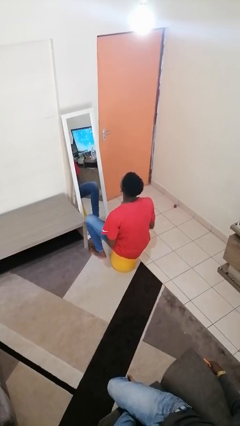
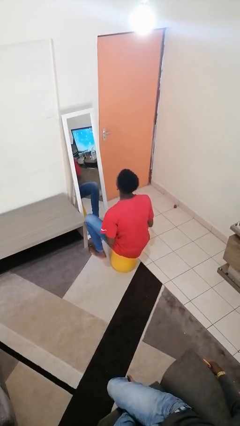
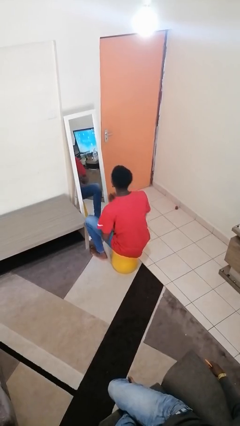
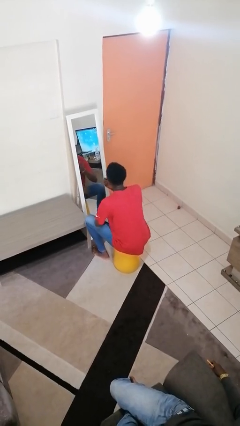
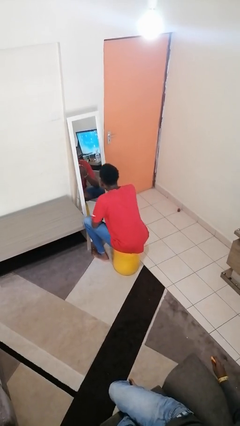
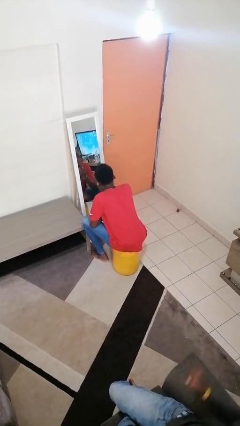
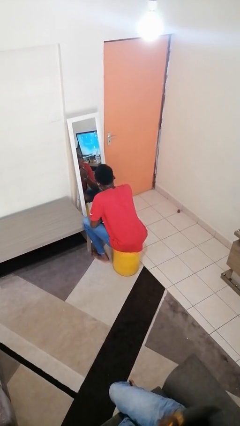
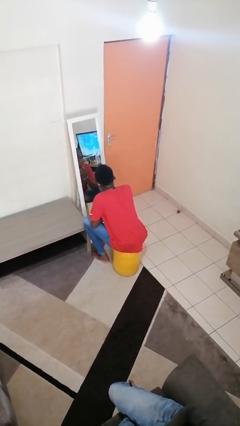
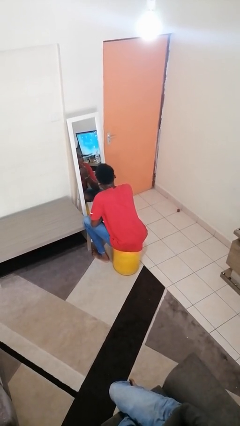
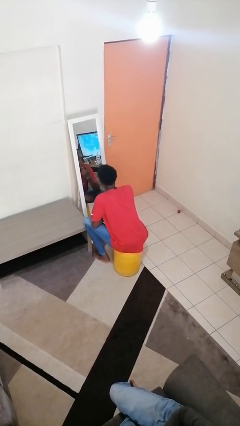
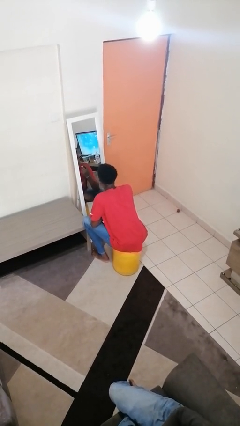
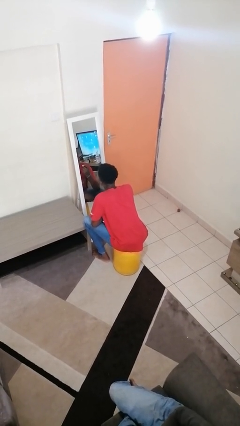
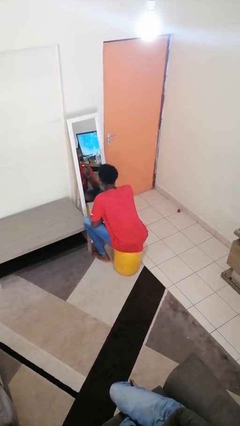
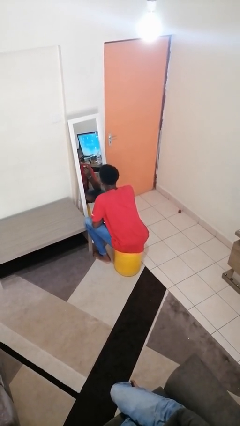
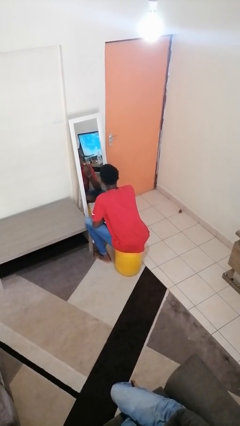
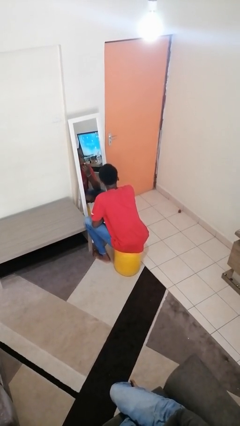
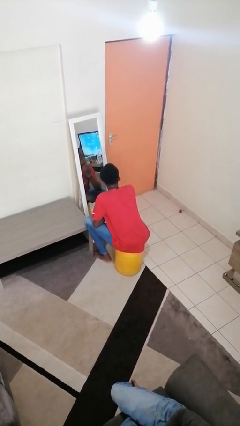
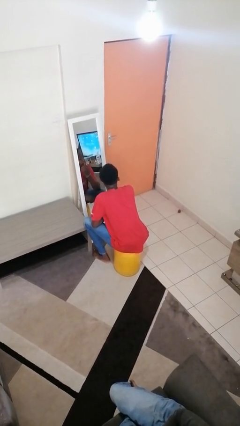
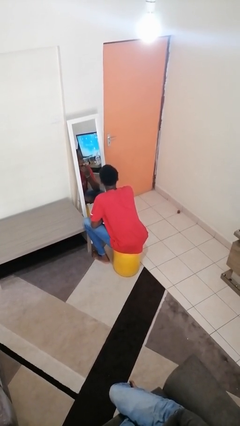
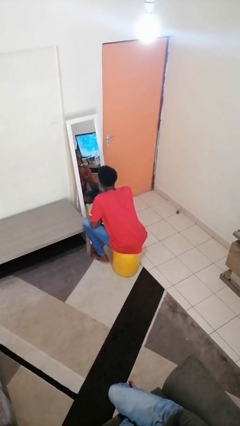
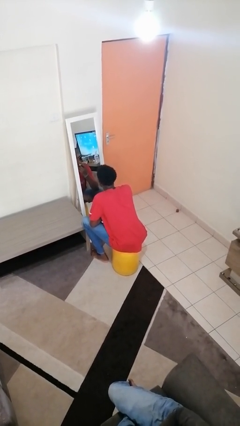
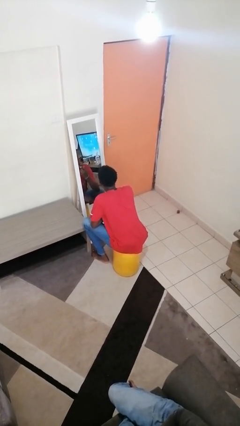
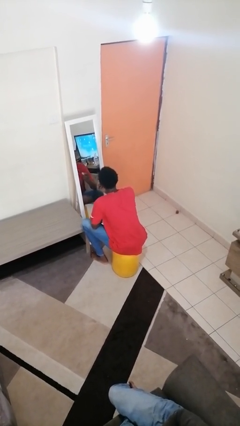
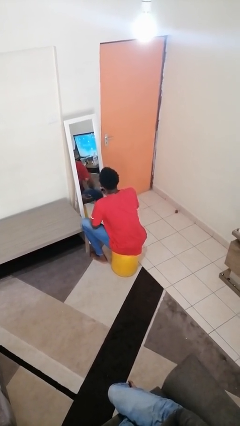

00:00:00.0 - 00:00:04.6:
person applies lip makeup

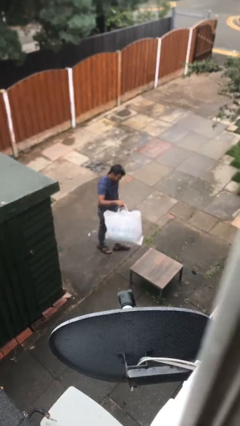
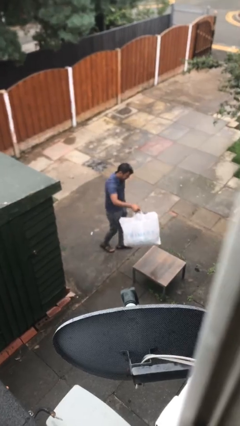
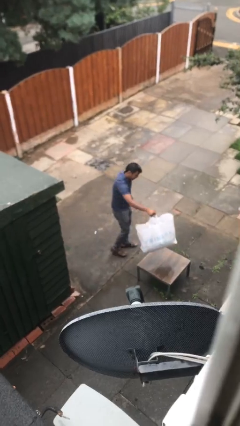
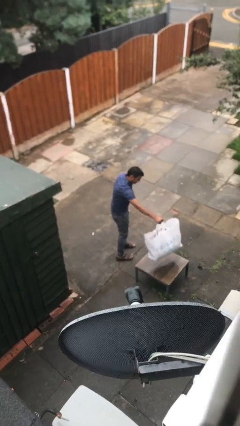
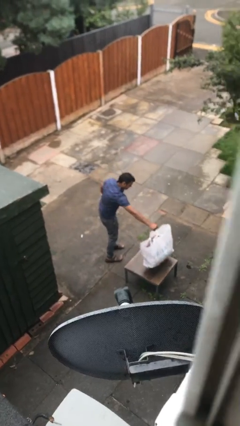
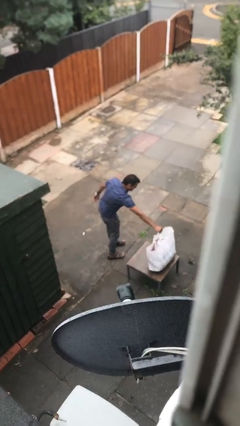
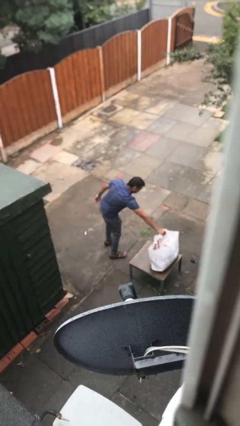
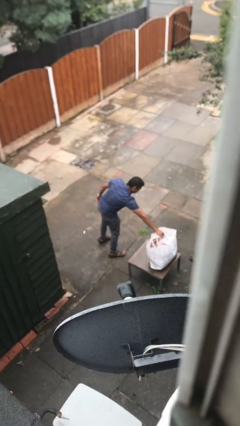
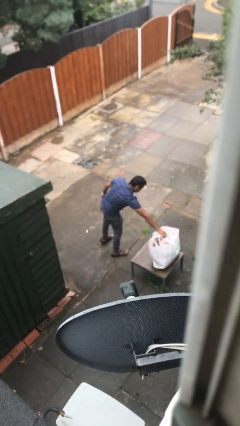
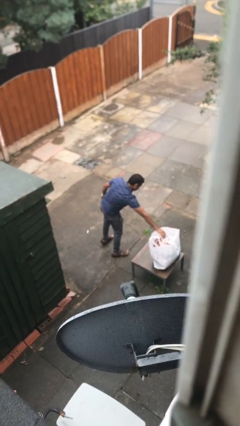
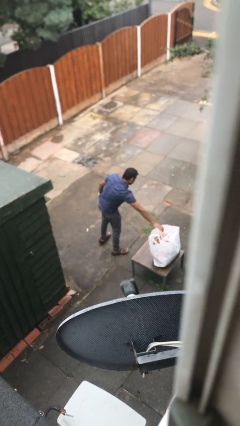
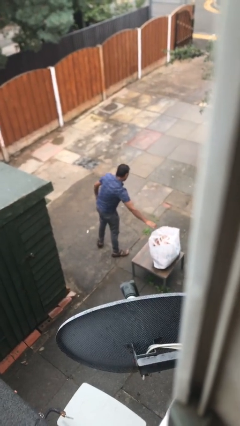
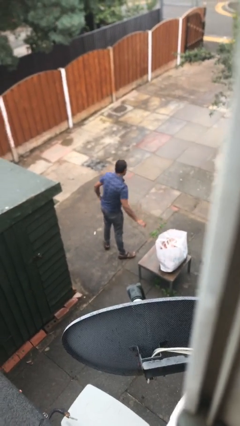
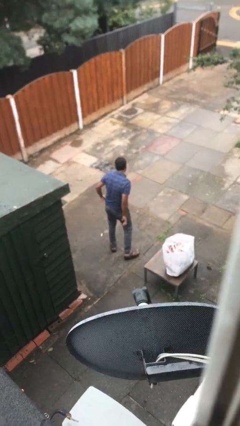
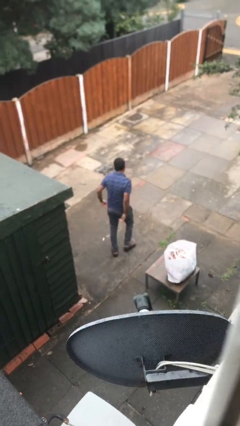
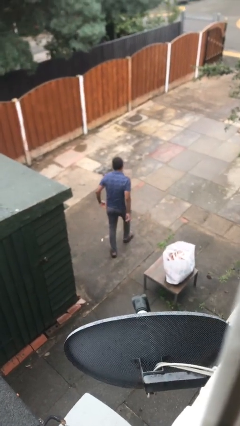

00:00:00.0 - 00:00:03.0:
person puts down object on table

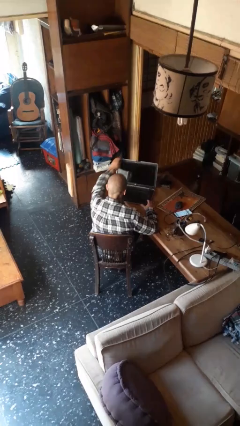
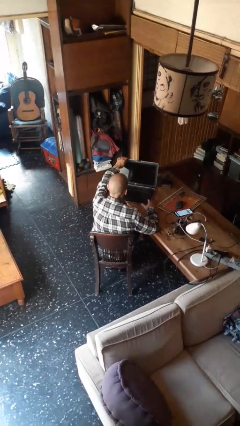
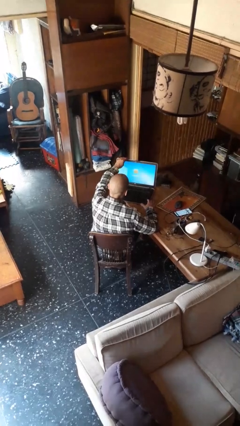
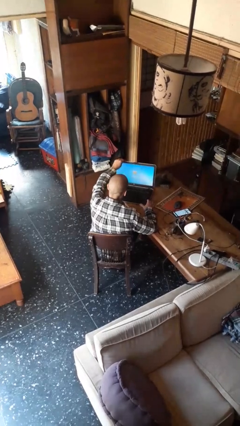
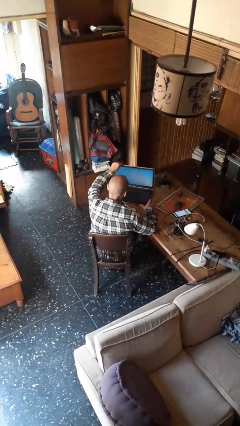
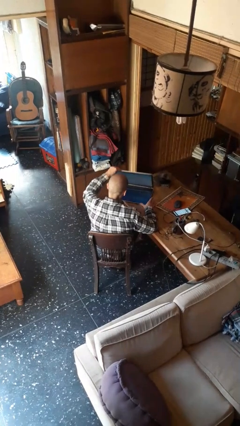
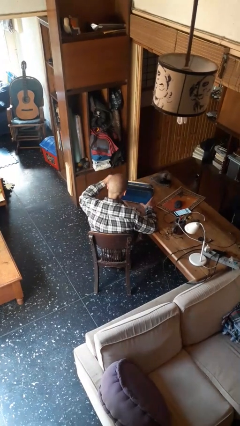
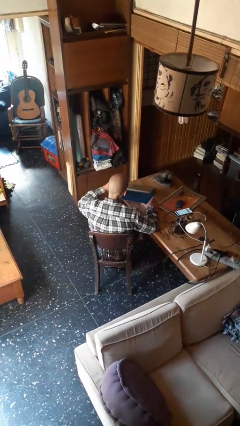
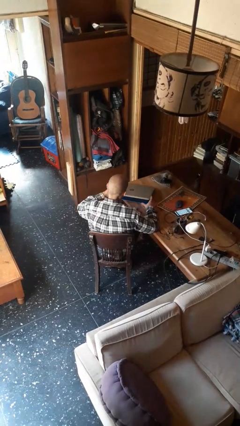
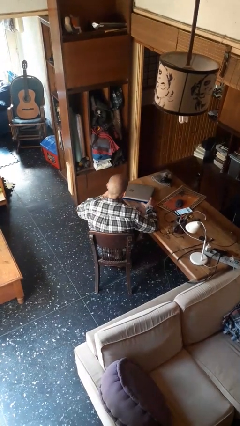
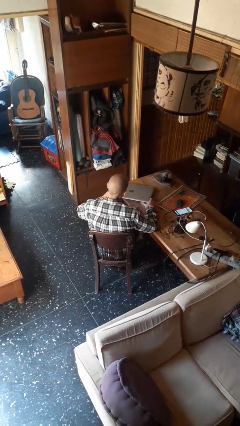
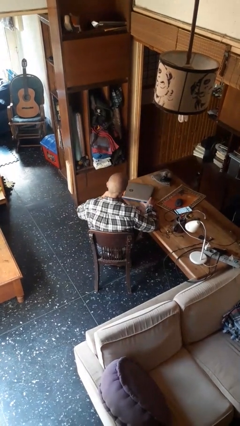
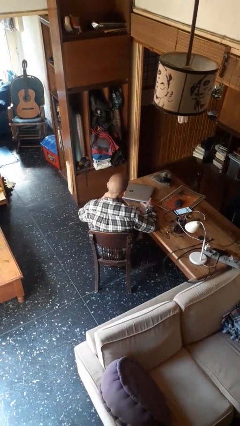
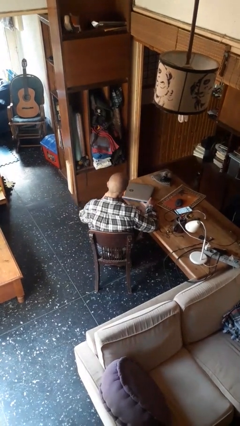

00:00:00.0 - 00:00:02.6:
person closes laptop

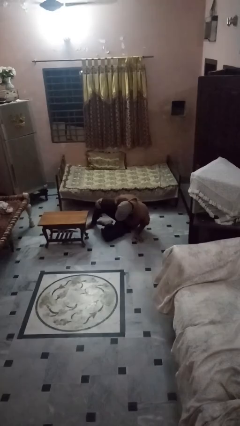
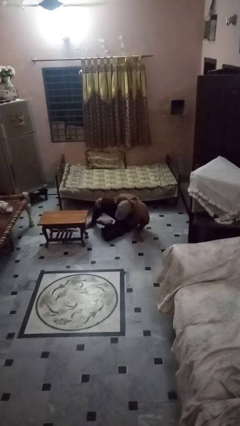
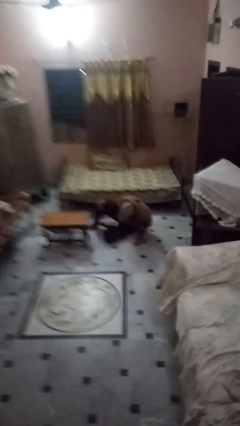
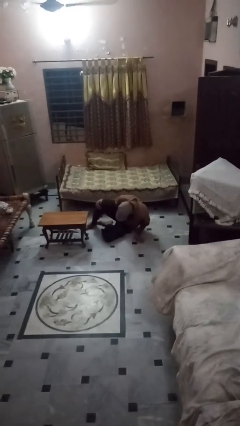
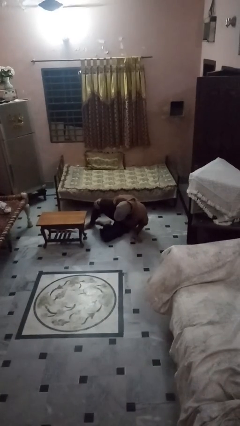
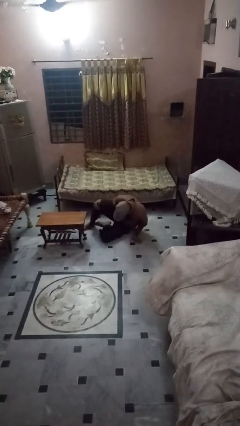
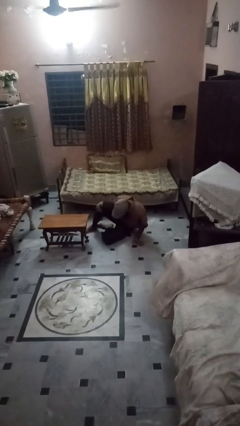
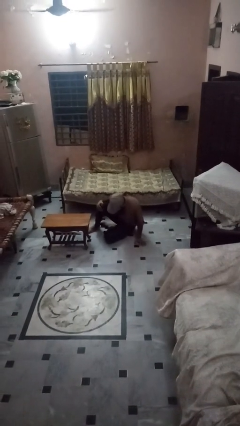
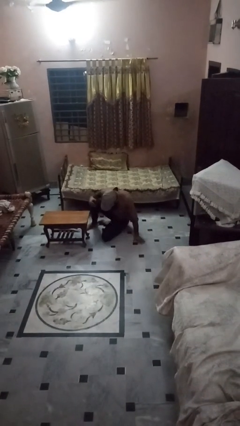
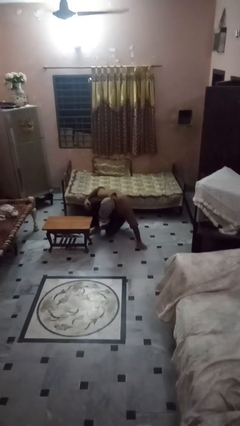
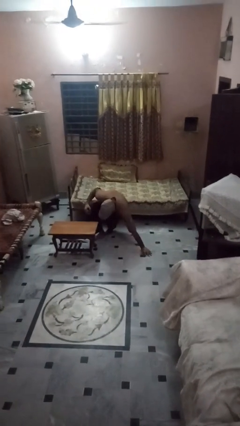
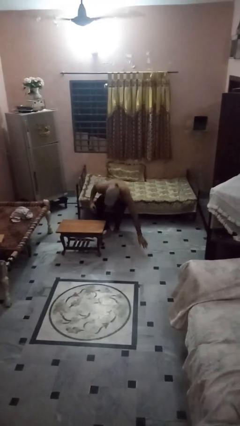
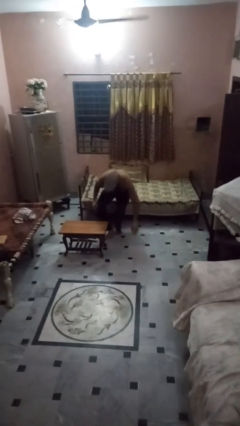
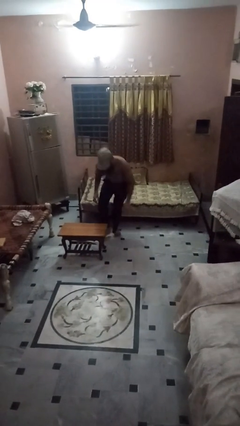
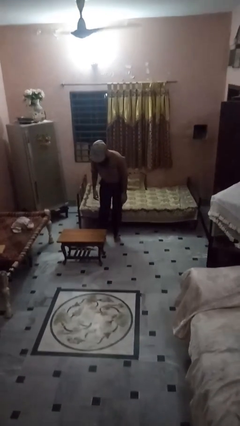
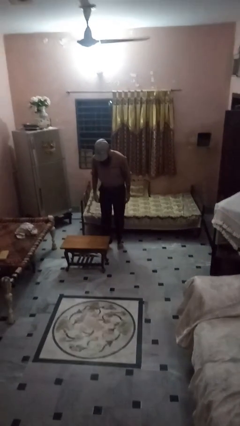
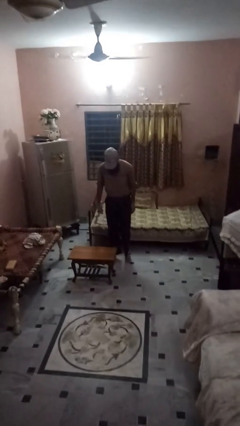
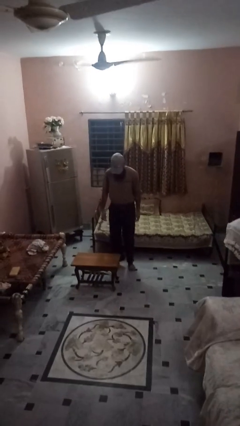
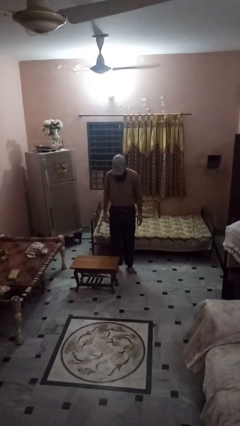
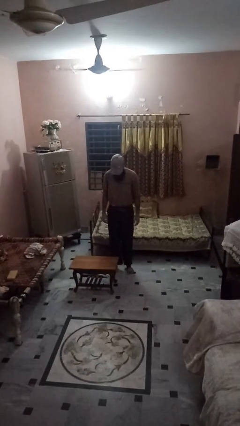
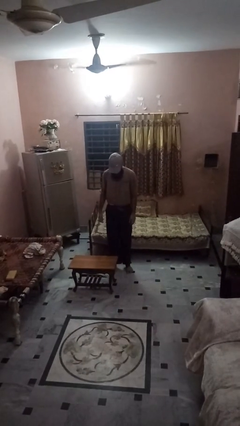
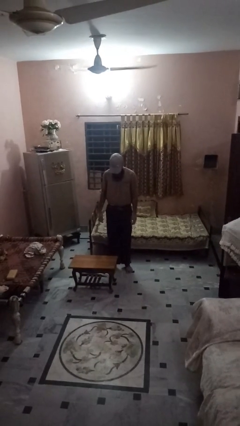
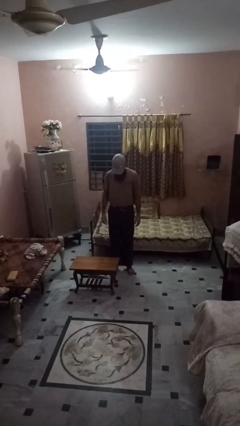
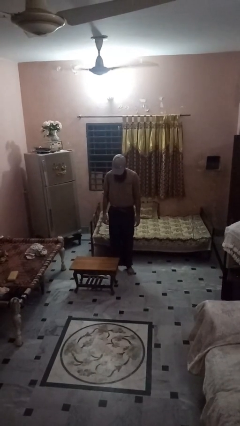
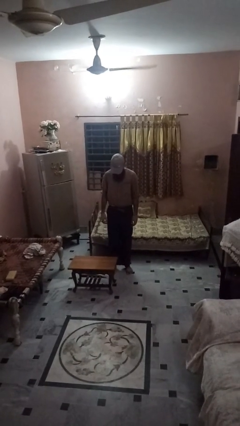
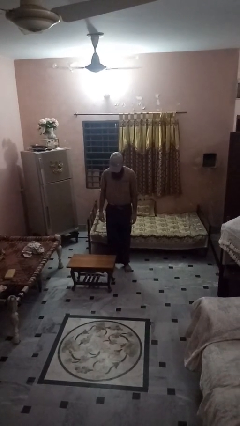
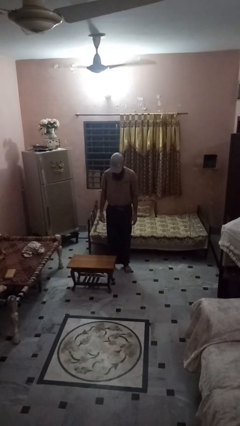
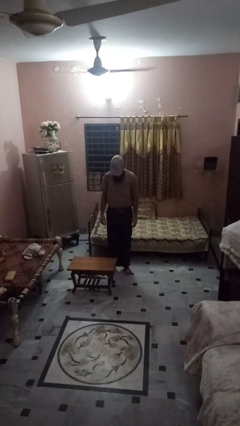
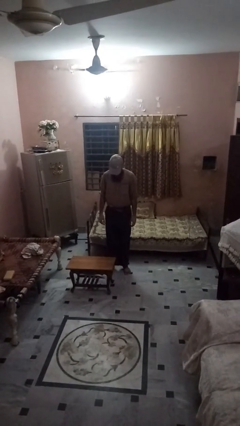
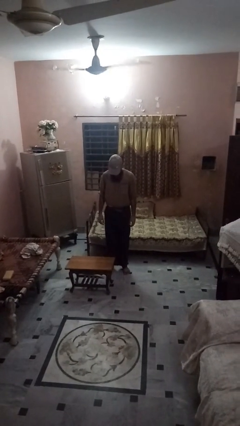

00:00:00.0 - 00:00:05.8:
person stands up from floor

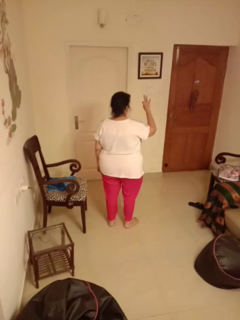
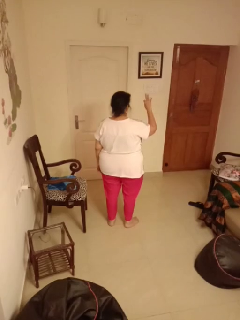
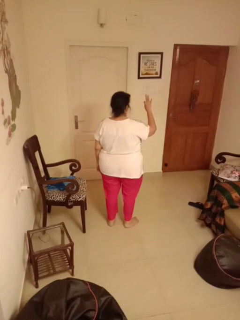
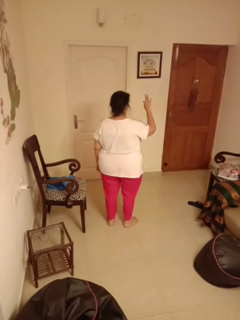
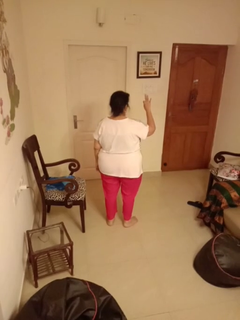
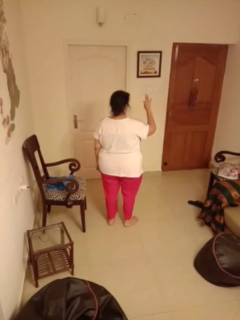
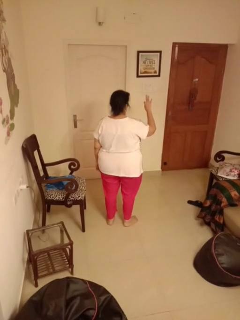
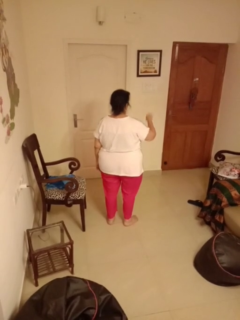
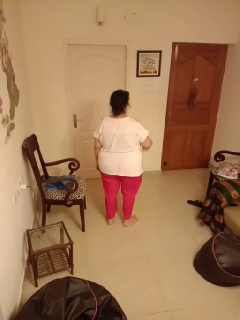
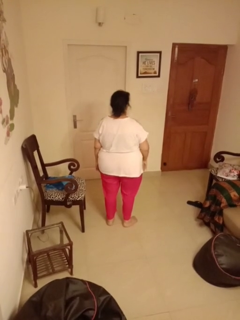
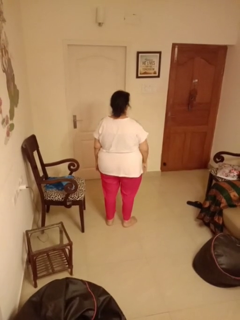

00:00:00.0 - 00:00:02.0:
person gestures number three

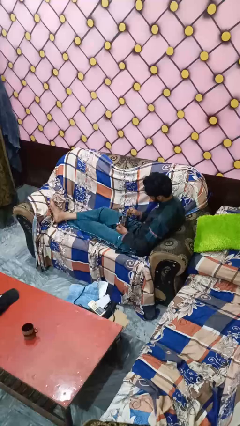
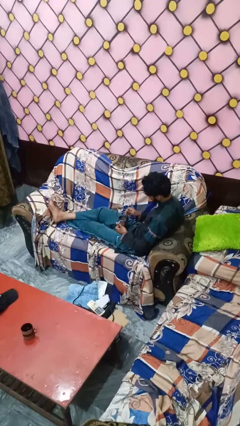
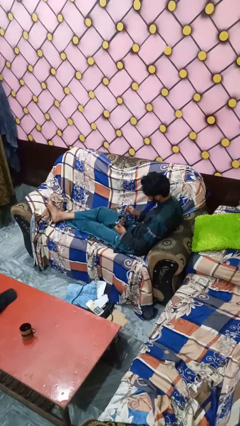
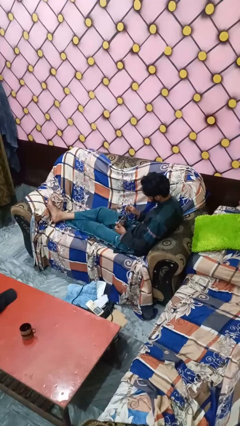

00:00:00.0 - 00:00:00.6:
person stirs mug
